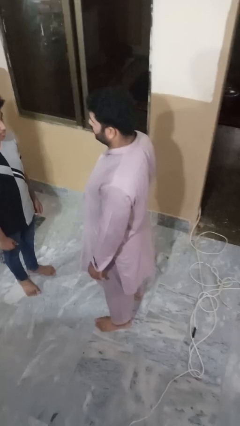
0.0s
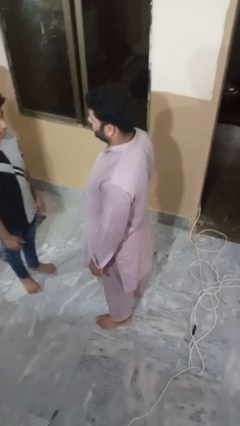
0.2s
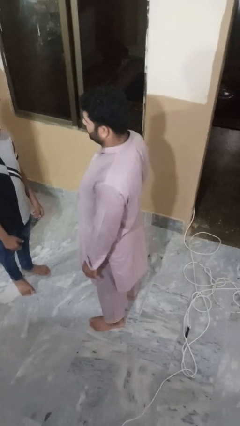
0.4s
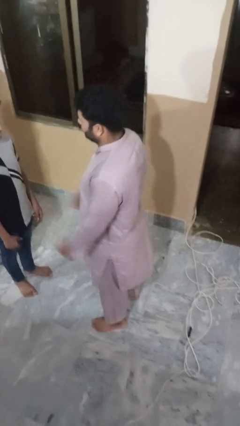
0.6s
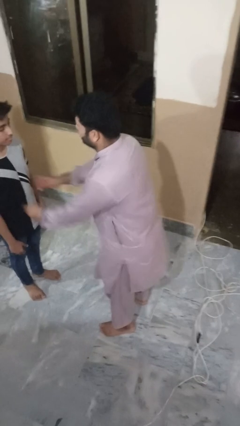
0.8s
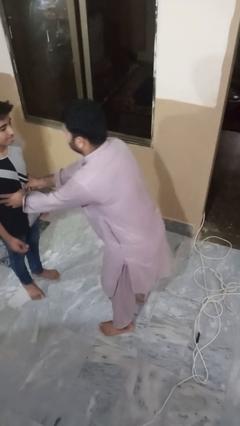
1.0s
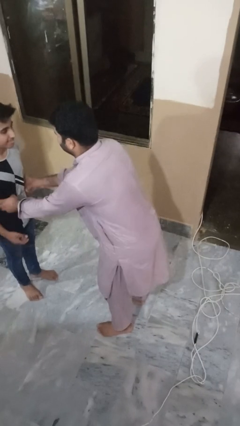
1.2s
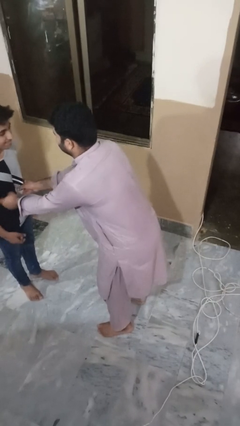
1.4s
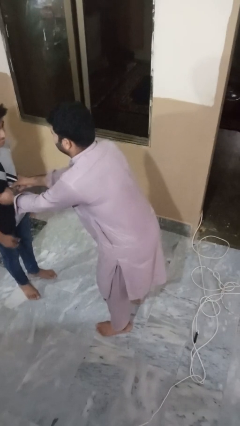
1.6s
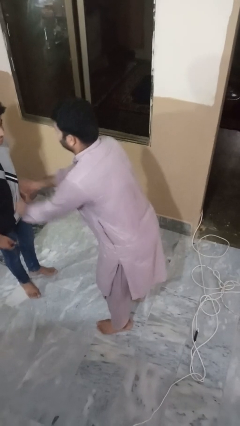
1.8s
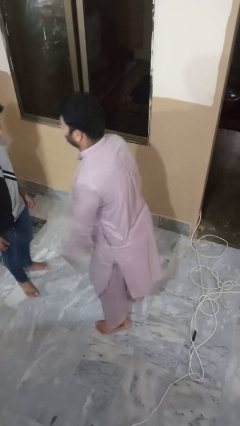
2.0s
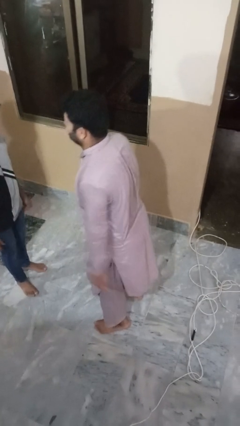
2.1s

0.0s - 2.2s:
person tickles person

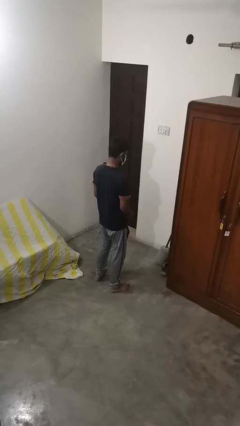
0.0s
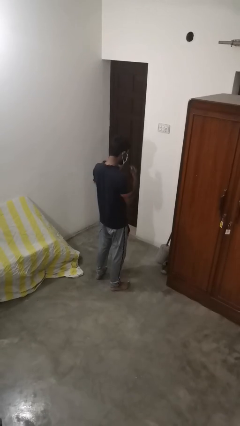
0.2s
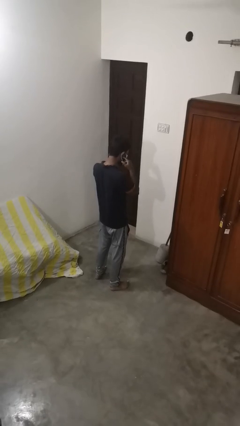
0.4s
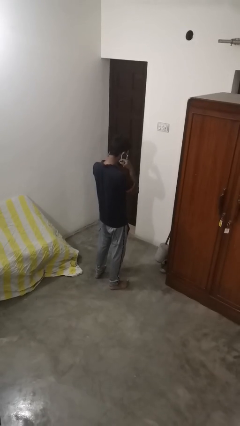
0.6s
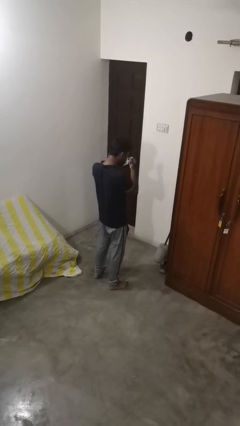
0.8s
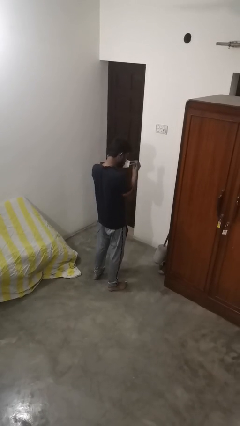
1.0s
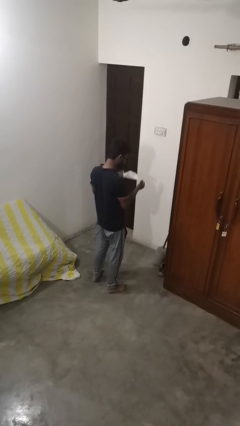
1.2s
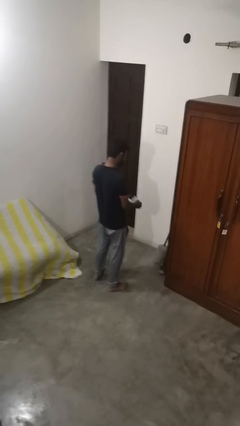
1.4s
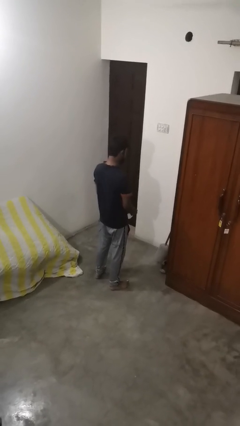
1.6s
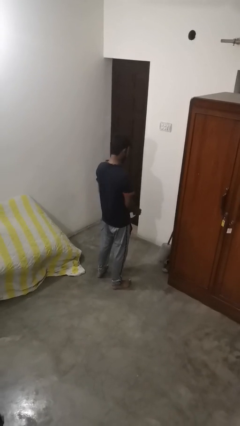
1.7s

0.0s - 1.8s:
person takes off facemask

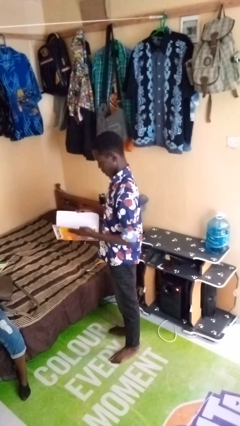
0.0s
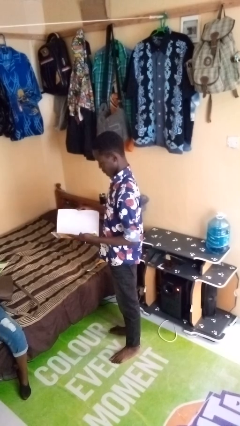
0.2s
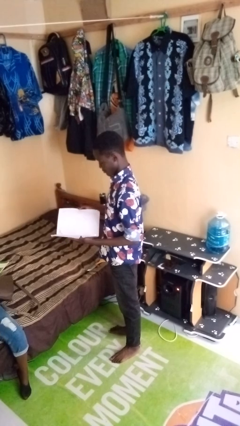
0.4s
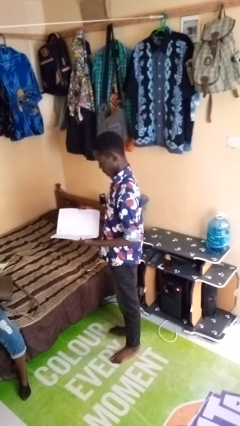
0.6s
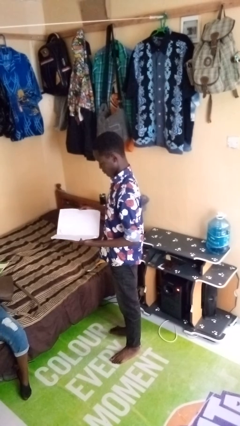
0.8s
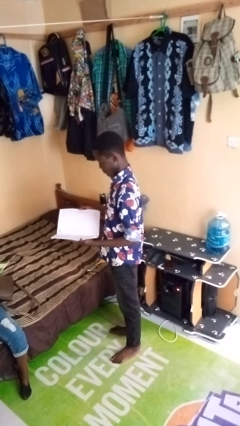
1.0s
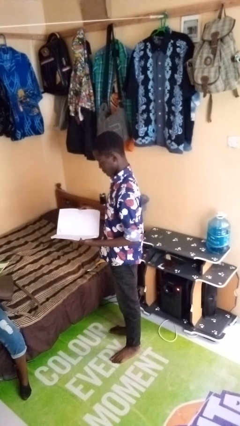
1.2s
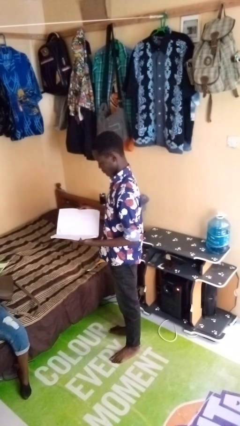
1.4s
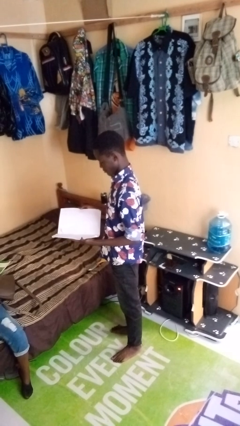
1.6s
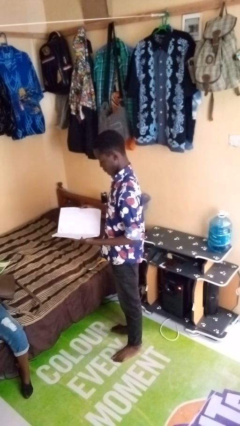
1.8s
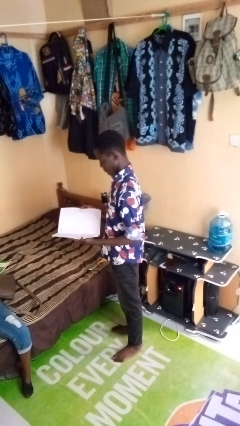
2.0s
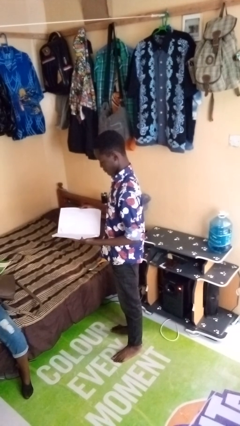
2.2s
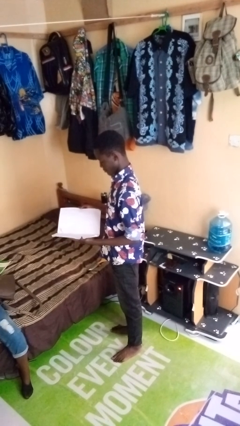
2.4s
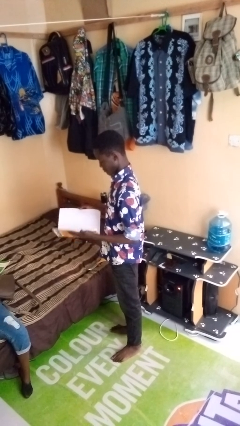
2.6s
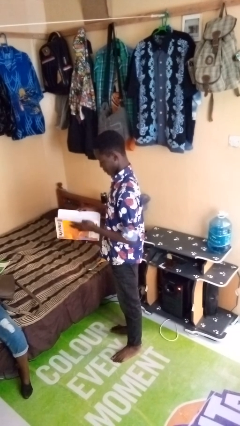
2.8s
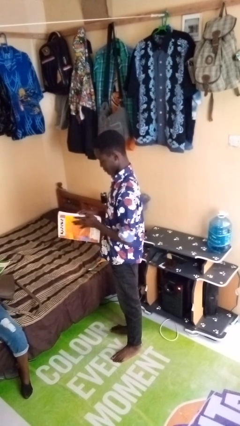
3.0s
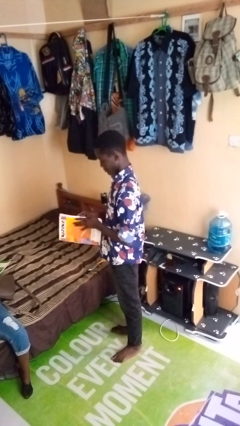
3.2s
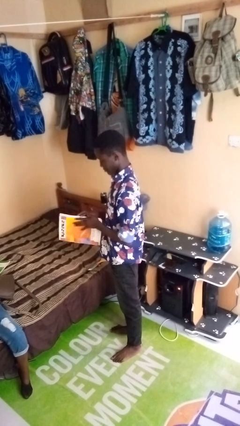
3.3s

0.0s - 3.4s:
person reads book

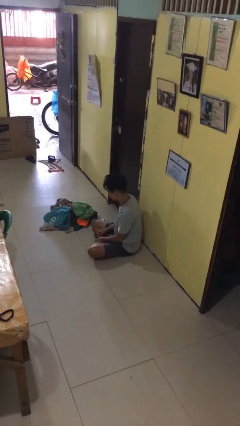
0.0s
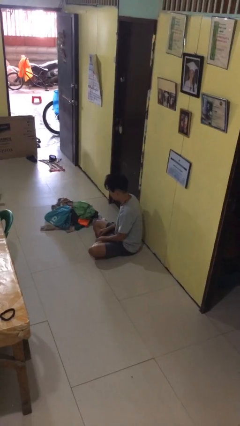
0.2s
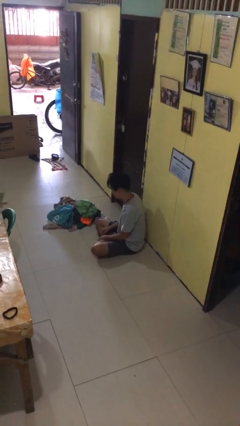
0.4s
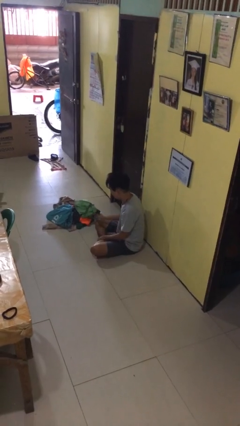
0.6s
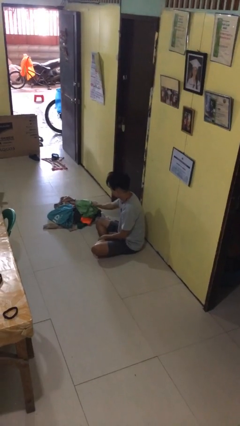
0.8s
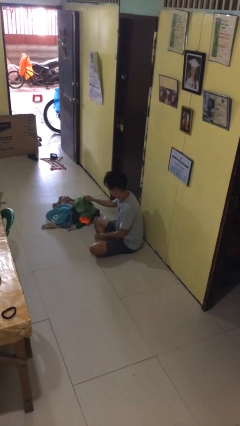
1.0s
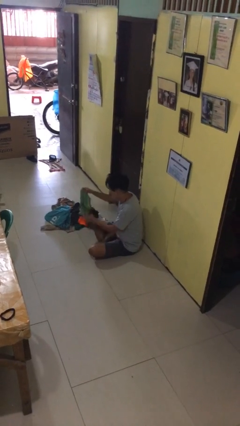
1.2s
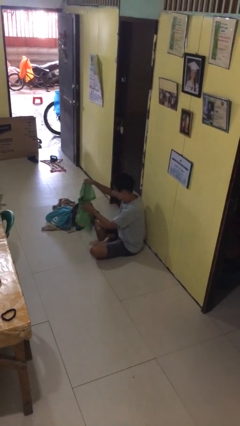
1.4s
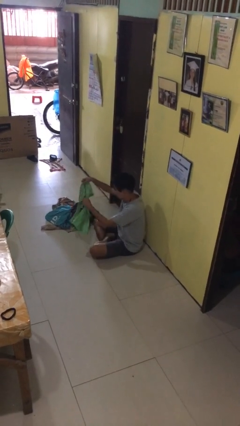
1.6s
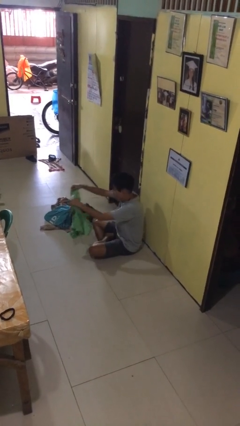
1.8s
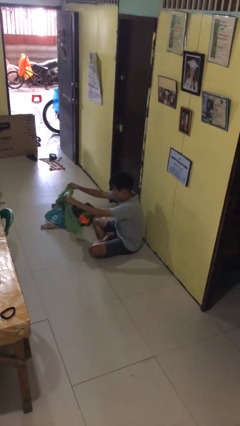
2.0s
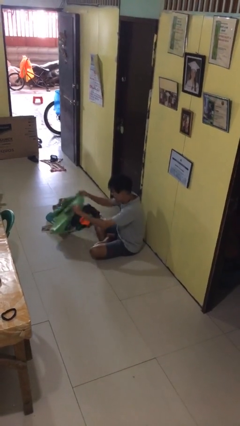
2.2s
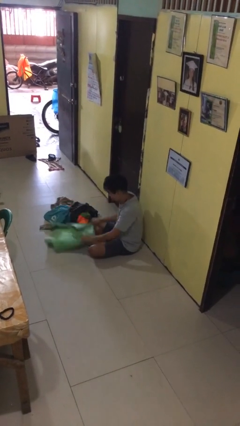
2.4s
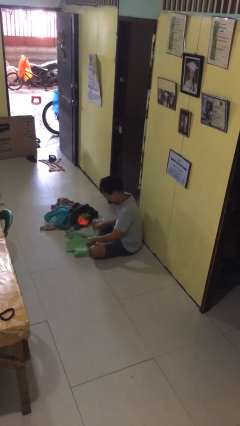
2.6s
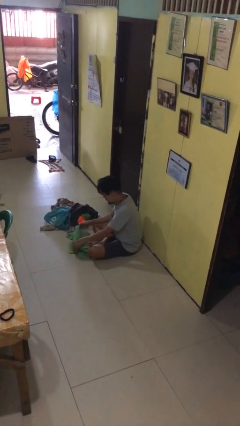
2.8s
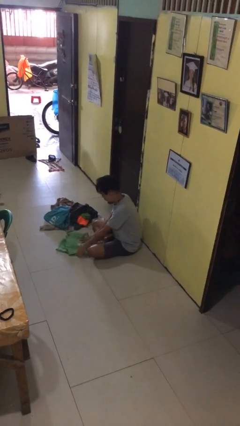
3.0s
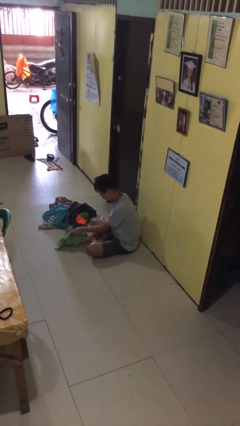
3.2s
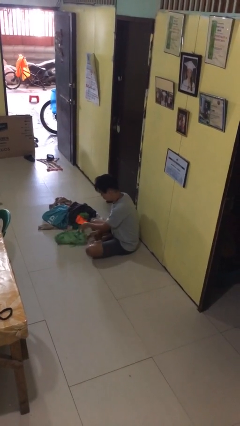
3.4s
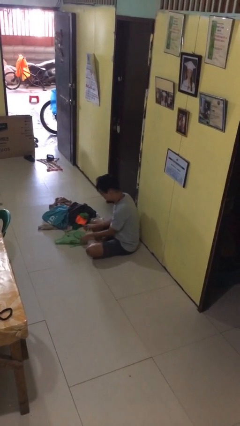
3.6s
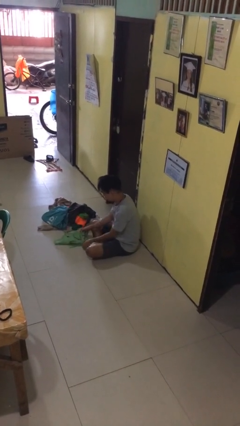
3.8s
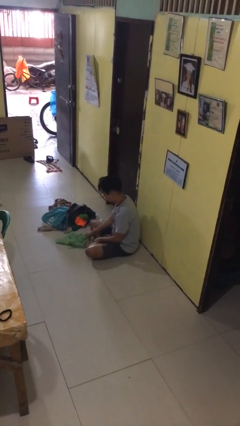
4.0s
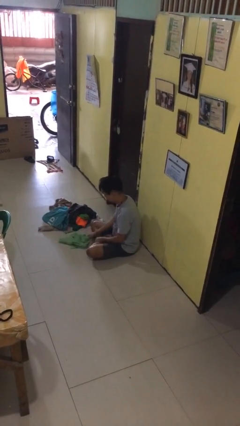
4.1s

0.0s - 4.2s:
person folds shirt

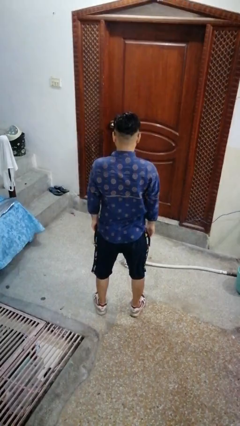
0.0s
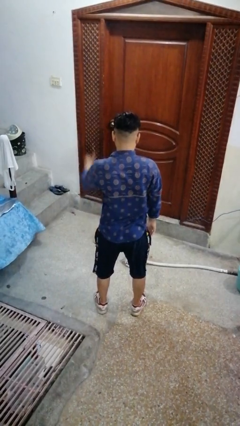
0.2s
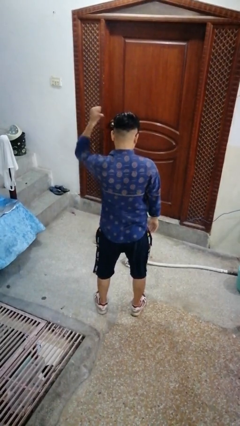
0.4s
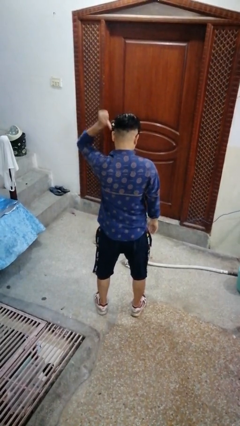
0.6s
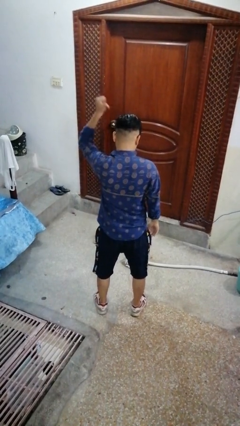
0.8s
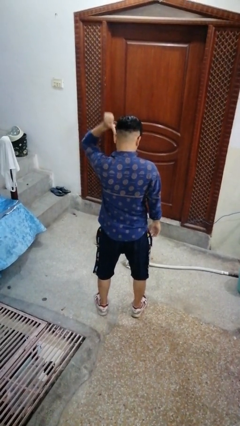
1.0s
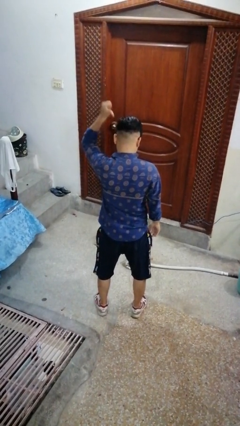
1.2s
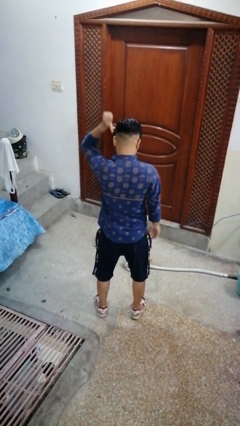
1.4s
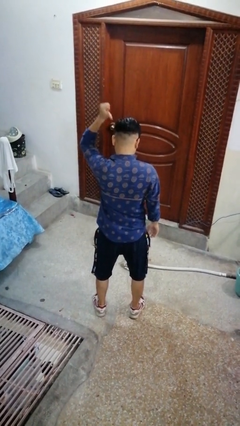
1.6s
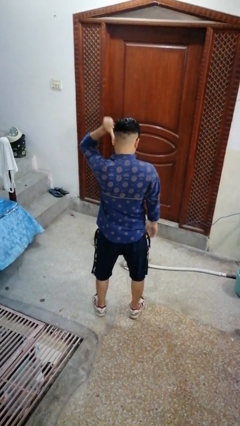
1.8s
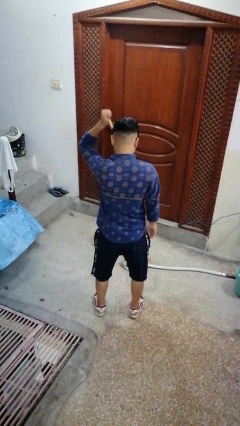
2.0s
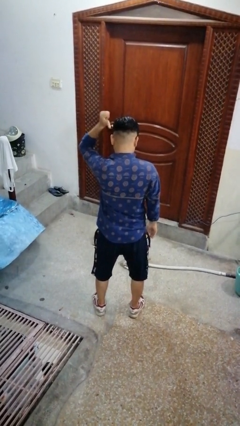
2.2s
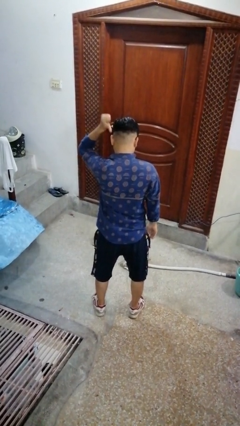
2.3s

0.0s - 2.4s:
person gestures behind me

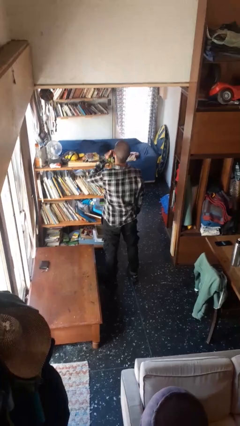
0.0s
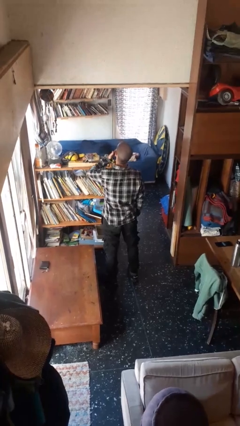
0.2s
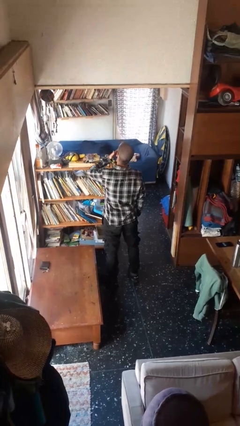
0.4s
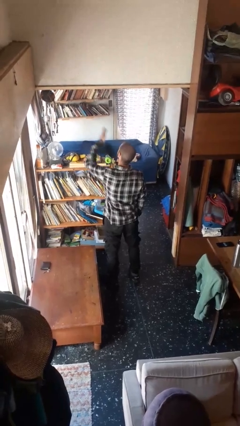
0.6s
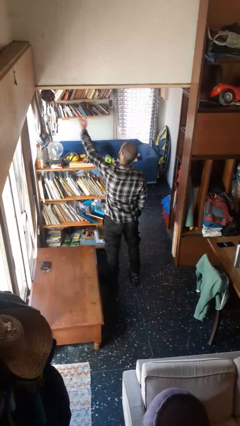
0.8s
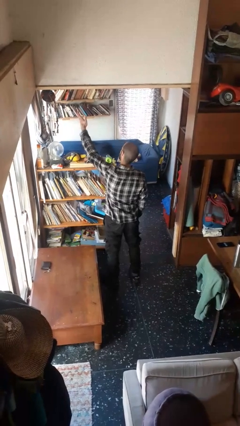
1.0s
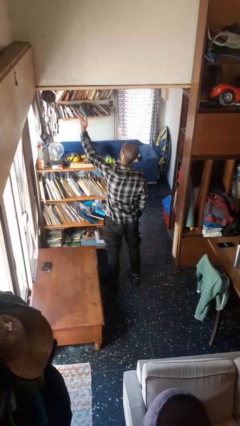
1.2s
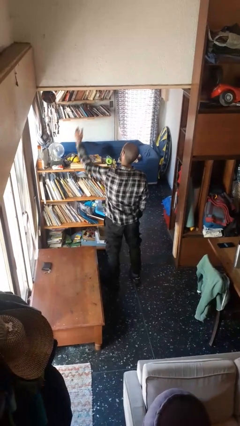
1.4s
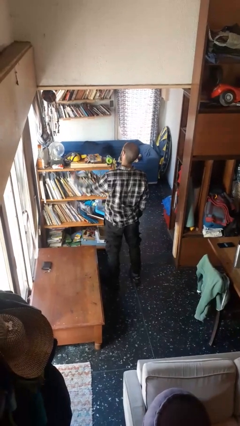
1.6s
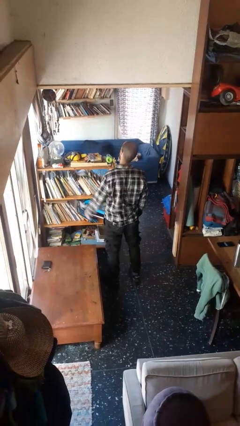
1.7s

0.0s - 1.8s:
person gestures blow kiss

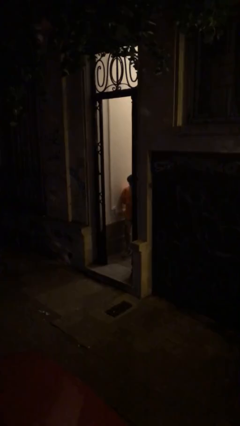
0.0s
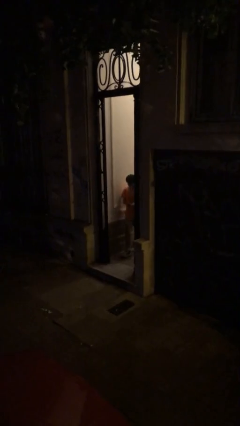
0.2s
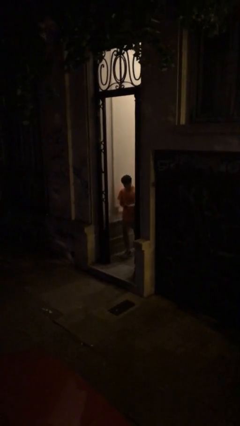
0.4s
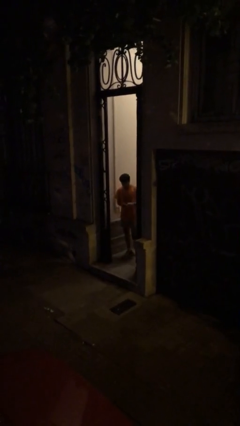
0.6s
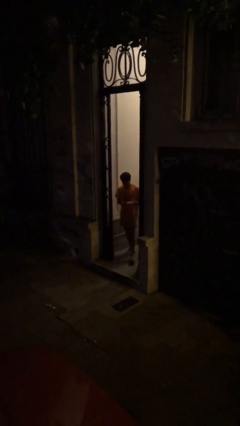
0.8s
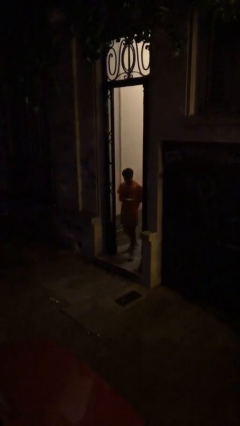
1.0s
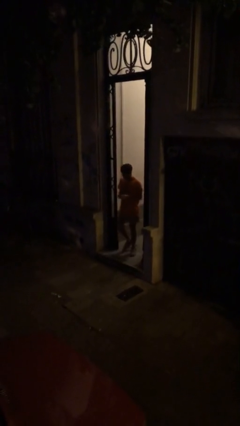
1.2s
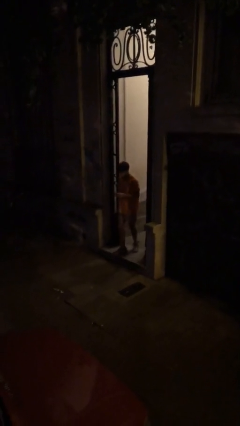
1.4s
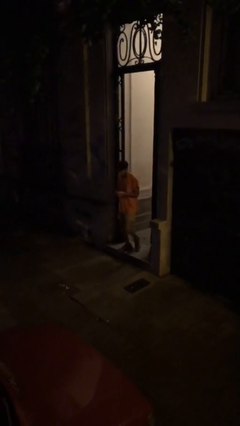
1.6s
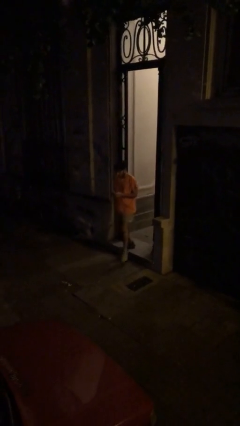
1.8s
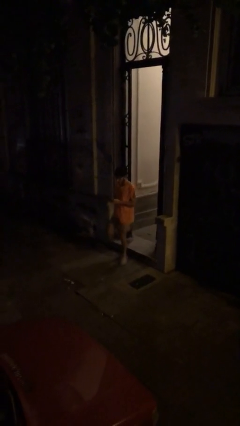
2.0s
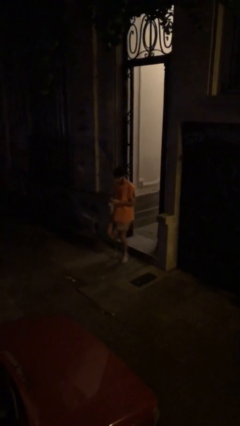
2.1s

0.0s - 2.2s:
person enters scene through structure
